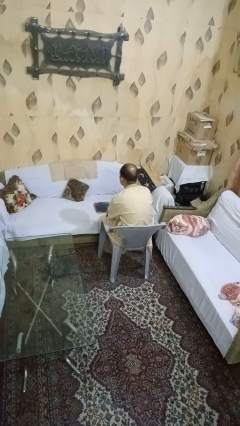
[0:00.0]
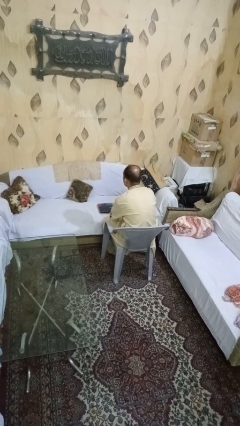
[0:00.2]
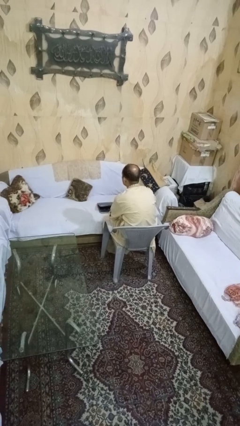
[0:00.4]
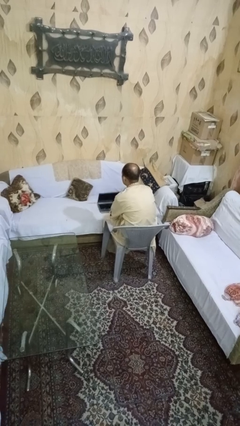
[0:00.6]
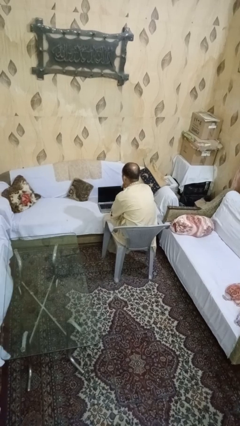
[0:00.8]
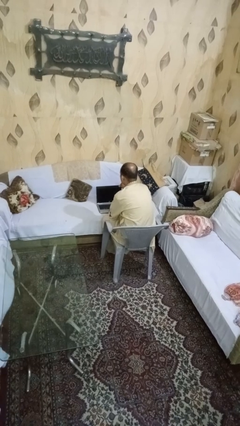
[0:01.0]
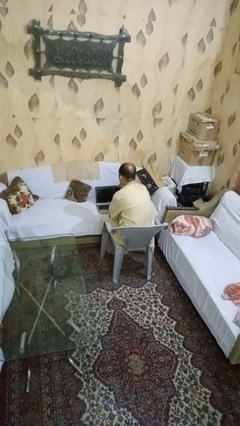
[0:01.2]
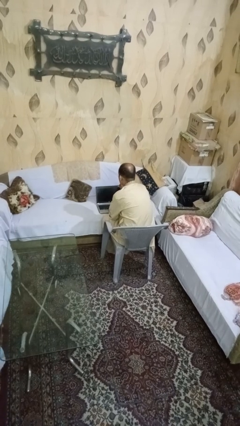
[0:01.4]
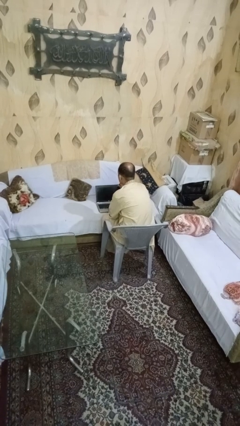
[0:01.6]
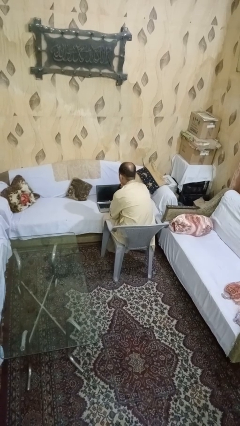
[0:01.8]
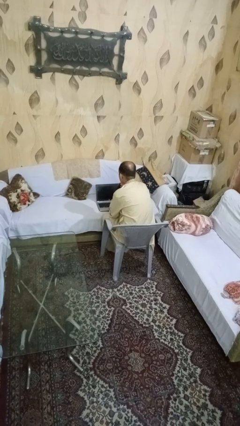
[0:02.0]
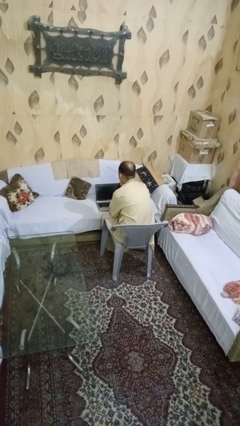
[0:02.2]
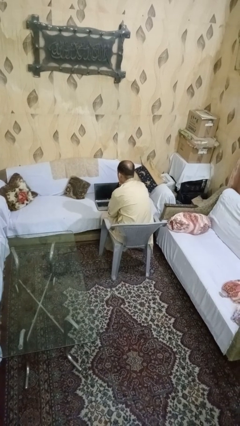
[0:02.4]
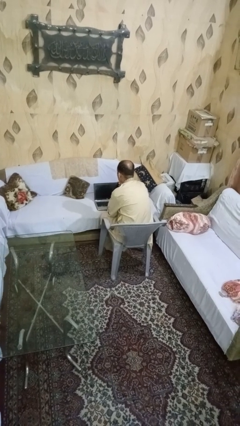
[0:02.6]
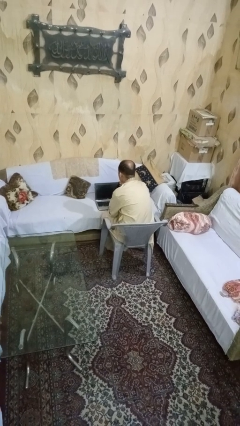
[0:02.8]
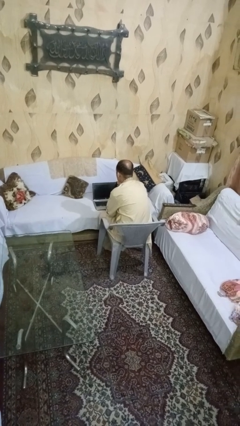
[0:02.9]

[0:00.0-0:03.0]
person opens laptop

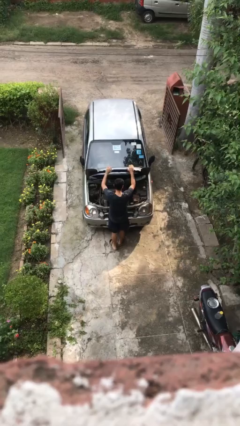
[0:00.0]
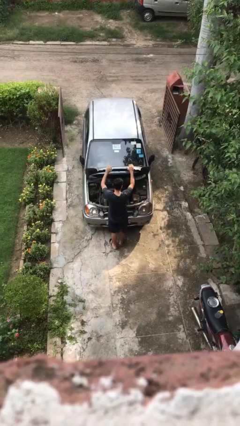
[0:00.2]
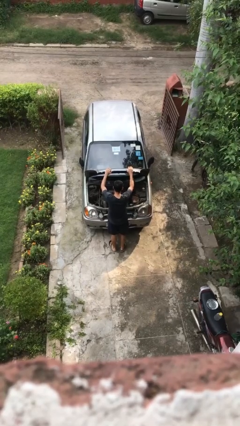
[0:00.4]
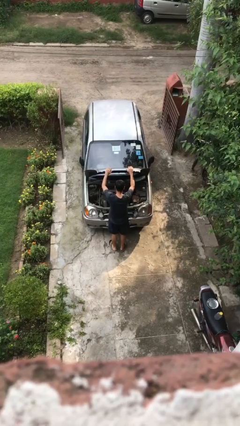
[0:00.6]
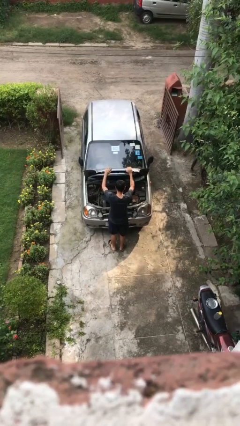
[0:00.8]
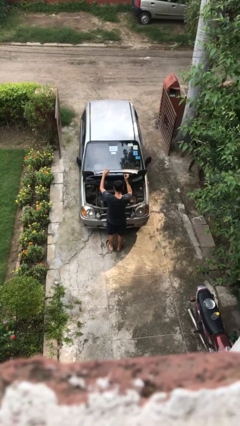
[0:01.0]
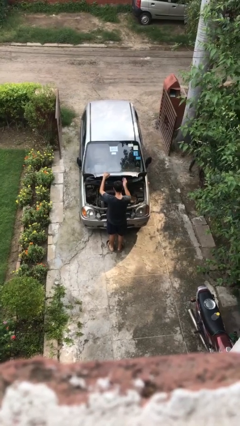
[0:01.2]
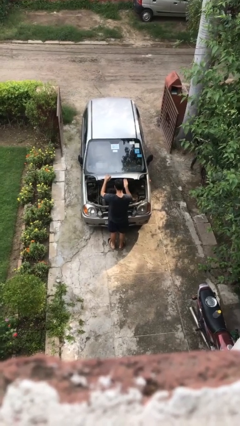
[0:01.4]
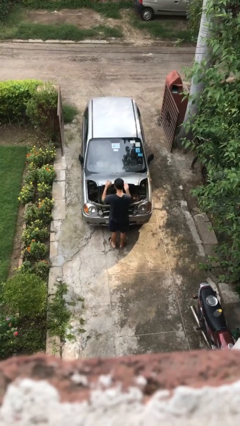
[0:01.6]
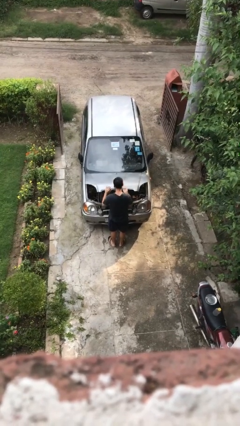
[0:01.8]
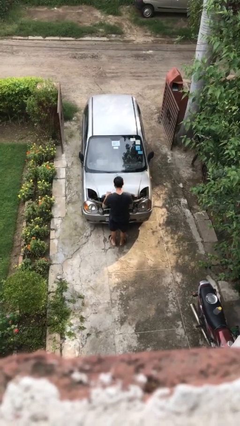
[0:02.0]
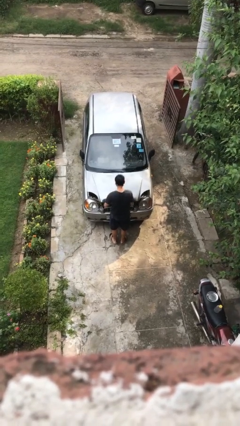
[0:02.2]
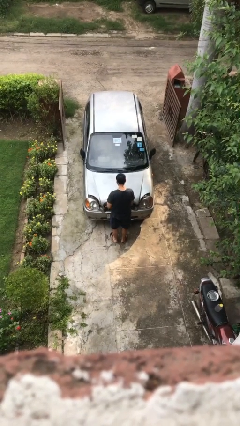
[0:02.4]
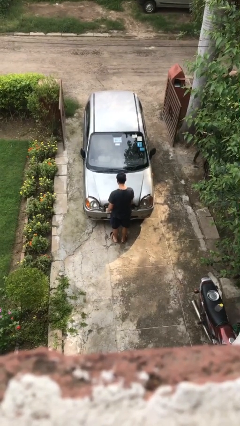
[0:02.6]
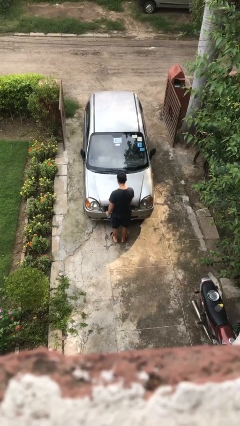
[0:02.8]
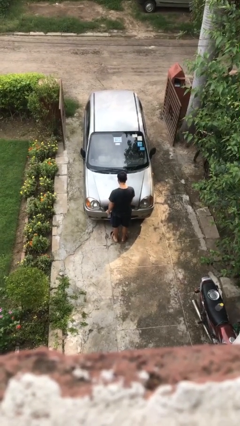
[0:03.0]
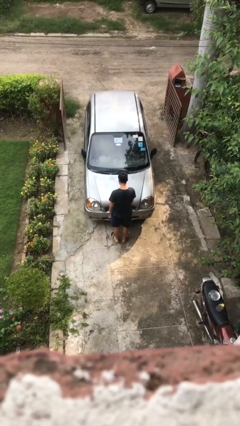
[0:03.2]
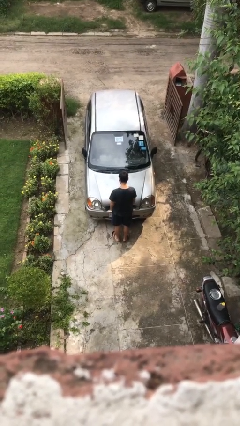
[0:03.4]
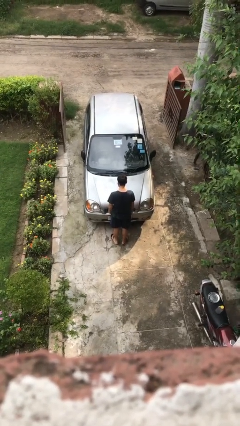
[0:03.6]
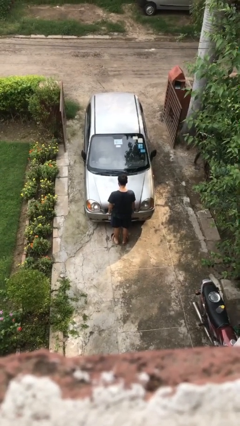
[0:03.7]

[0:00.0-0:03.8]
person closes car hood

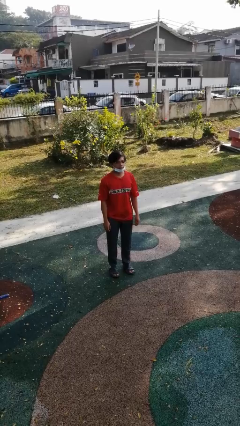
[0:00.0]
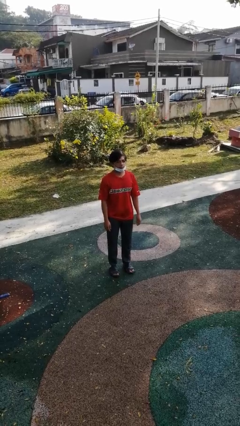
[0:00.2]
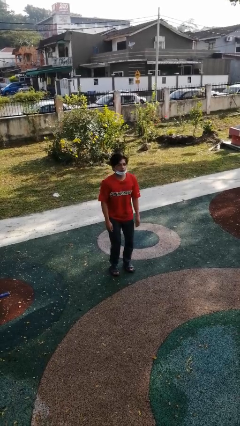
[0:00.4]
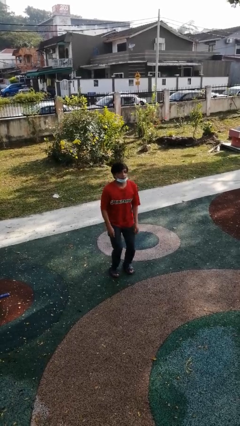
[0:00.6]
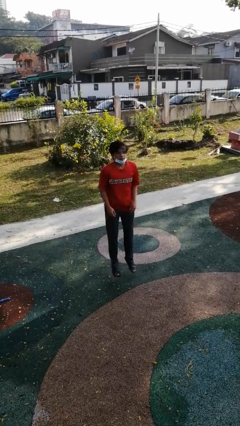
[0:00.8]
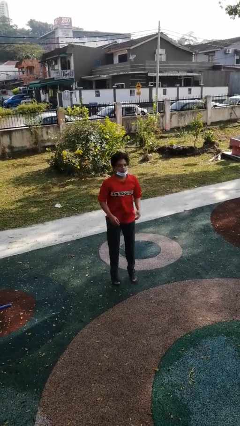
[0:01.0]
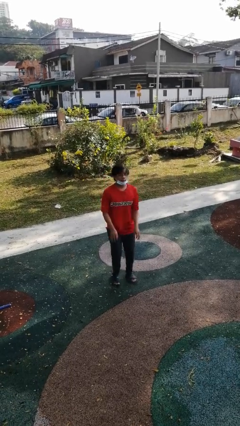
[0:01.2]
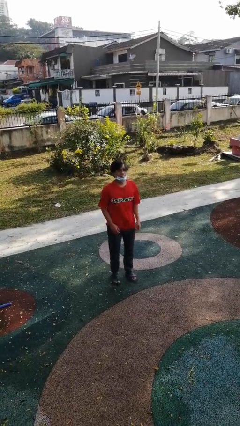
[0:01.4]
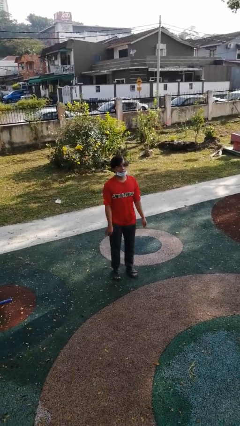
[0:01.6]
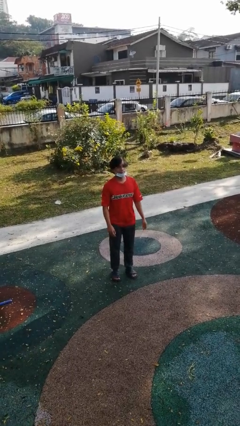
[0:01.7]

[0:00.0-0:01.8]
person jumps

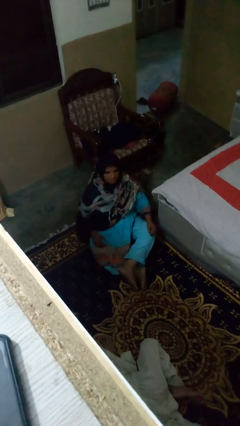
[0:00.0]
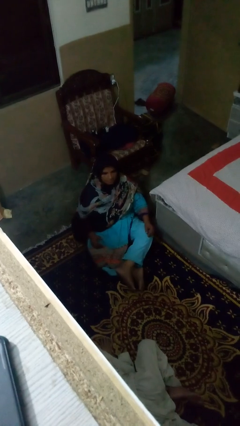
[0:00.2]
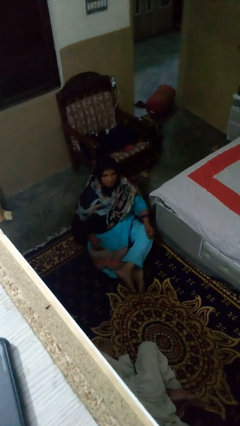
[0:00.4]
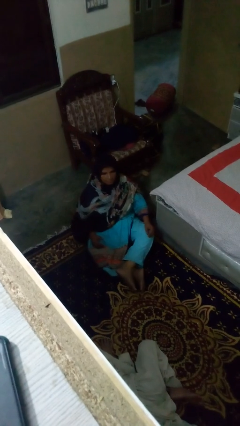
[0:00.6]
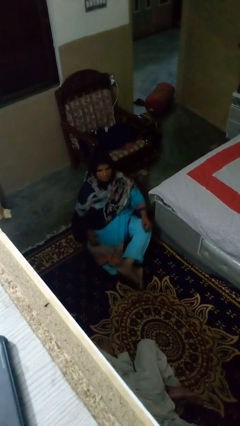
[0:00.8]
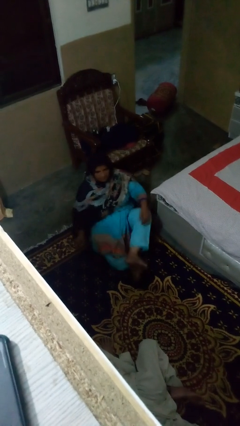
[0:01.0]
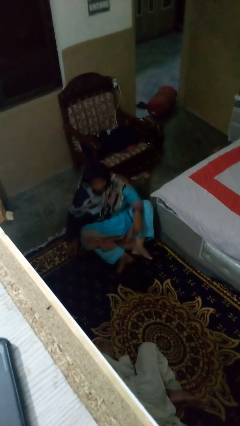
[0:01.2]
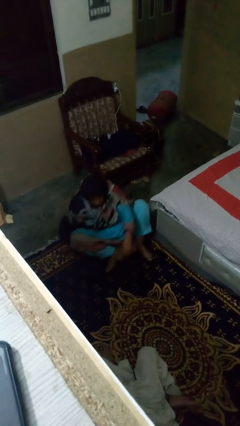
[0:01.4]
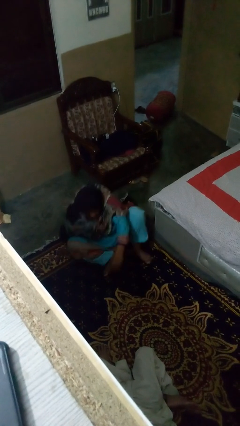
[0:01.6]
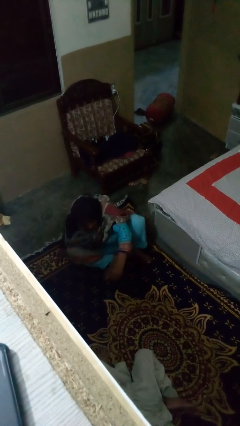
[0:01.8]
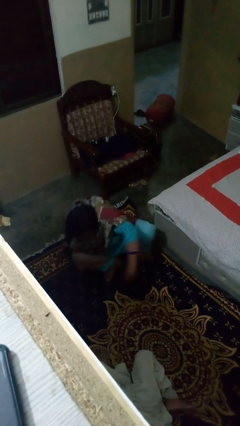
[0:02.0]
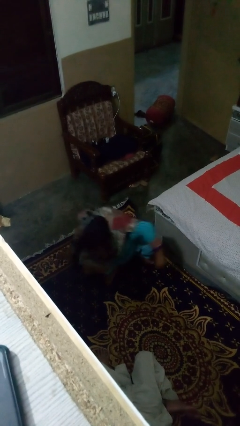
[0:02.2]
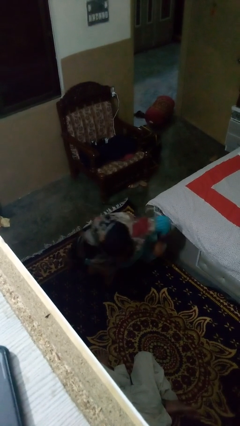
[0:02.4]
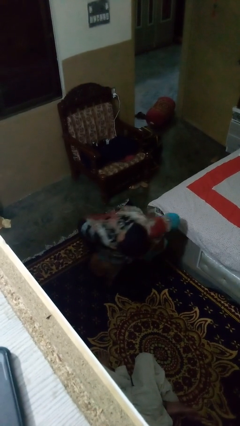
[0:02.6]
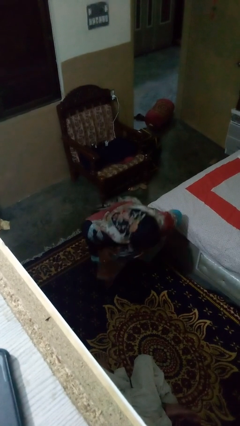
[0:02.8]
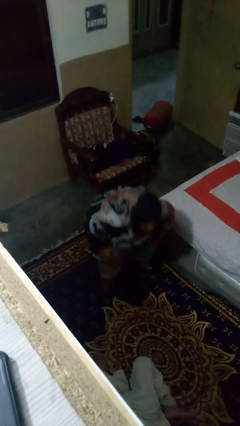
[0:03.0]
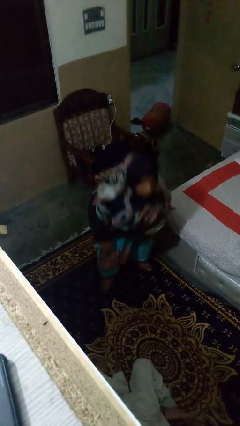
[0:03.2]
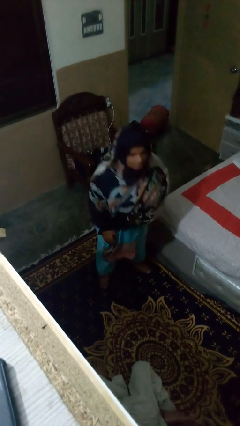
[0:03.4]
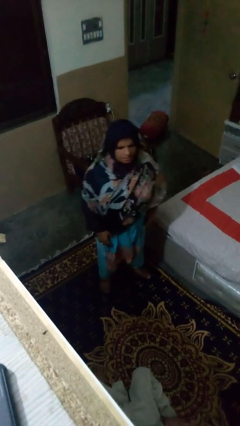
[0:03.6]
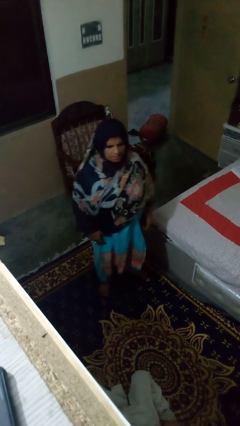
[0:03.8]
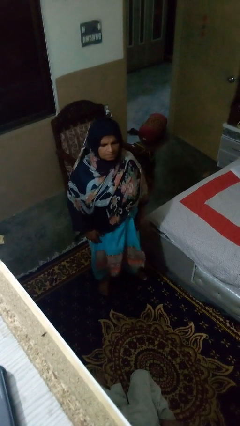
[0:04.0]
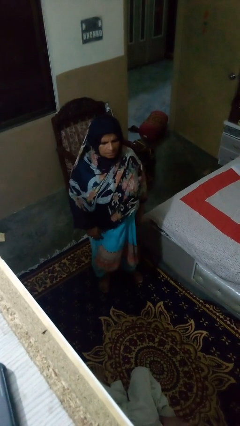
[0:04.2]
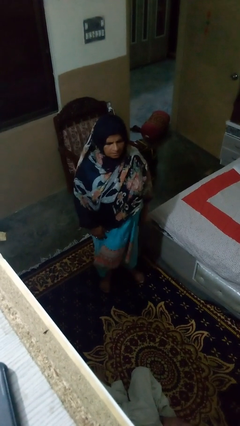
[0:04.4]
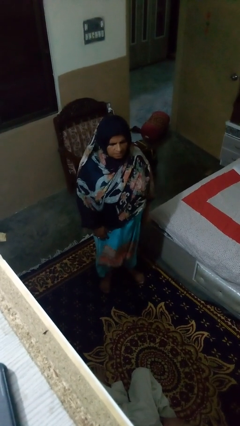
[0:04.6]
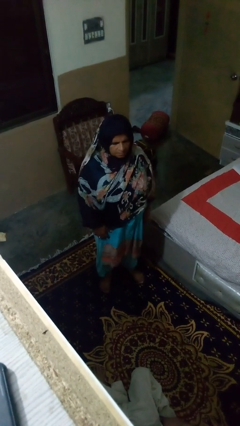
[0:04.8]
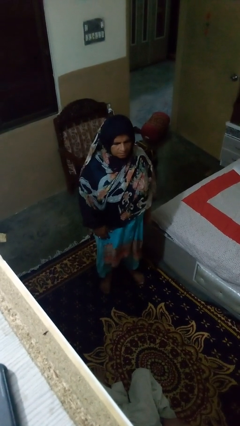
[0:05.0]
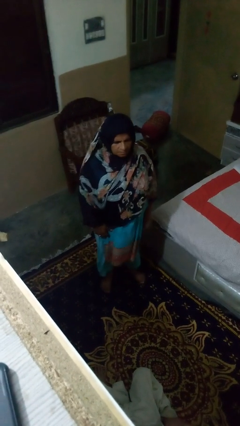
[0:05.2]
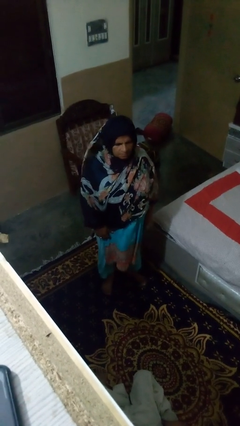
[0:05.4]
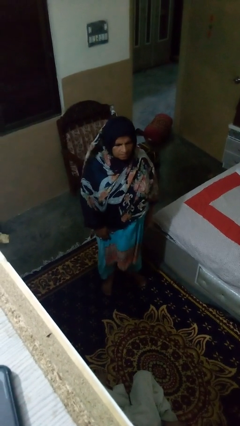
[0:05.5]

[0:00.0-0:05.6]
person stands up from floor

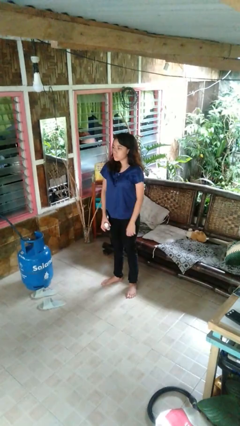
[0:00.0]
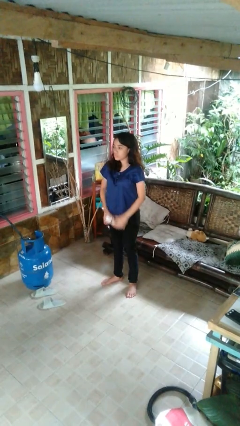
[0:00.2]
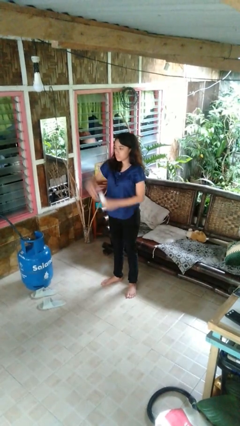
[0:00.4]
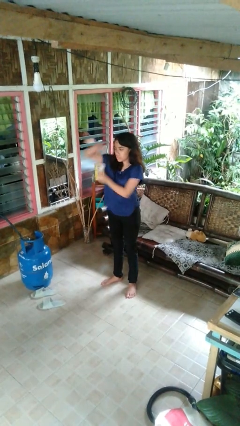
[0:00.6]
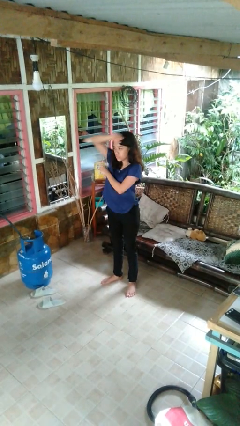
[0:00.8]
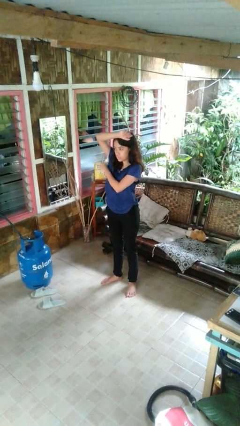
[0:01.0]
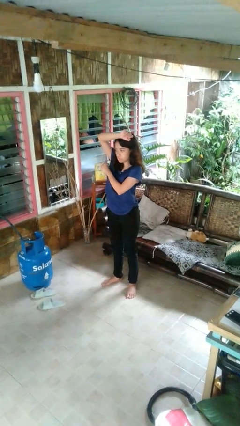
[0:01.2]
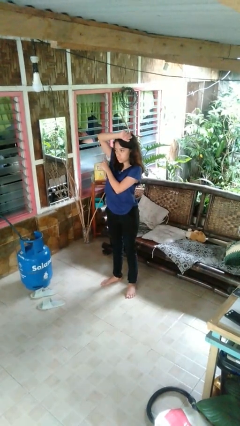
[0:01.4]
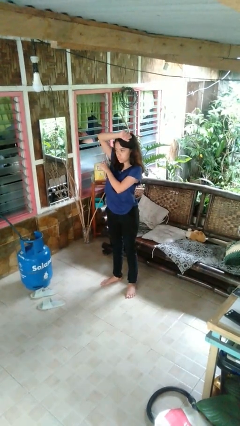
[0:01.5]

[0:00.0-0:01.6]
person applies deodorant

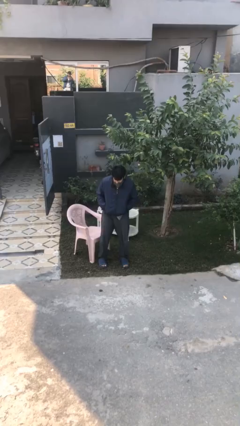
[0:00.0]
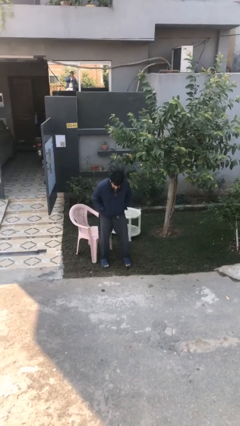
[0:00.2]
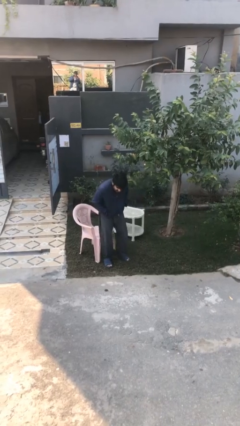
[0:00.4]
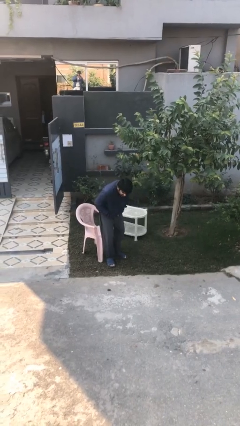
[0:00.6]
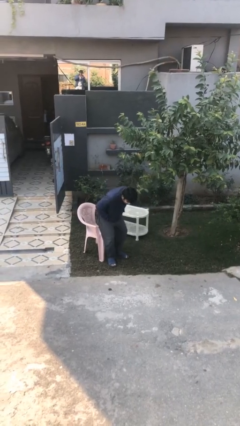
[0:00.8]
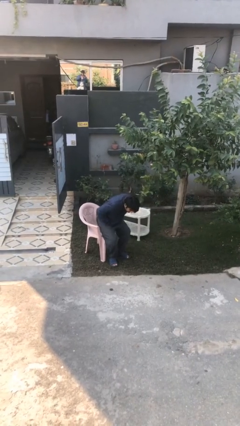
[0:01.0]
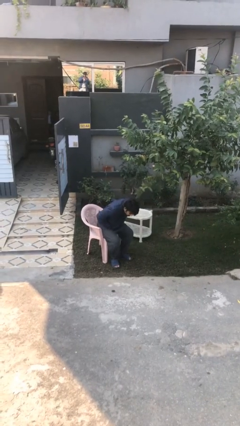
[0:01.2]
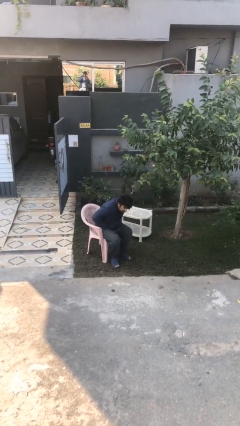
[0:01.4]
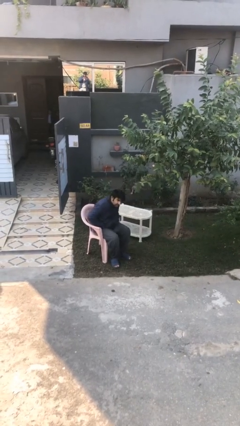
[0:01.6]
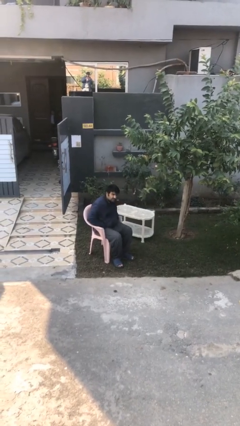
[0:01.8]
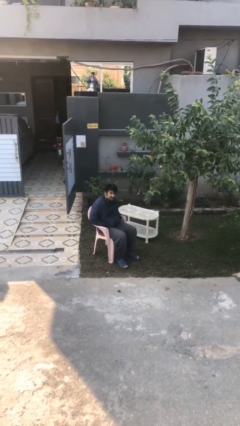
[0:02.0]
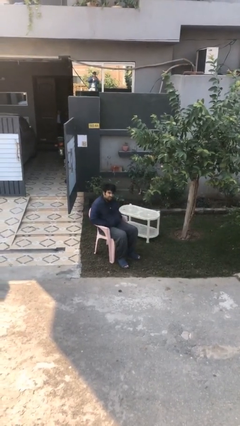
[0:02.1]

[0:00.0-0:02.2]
person sits down
